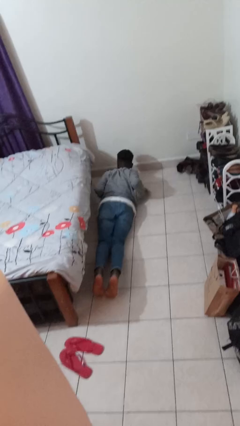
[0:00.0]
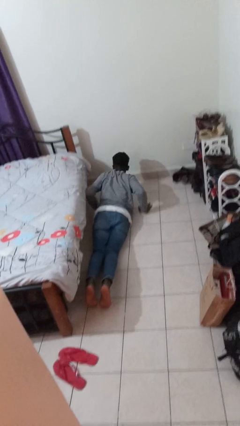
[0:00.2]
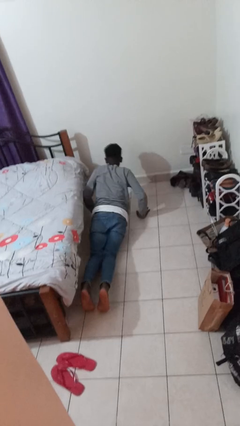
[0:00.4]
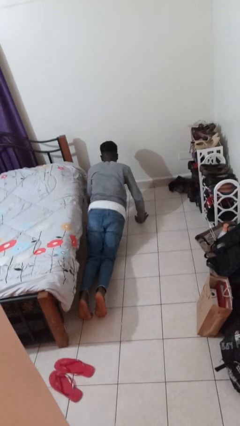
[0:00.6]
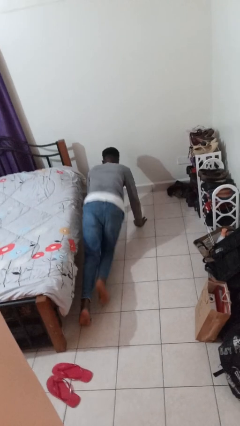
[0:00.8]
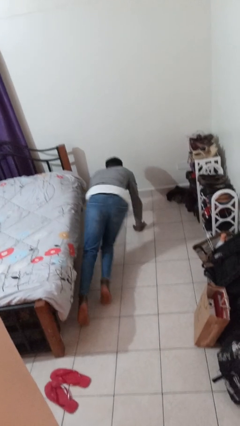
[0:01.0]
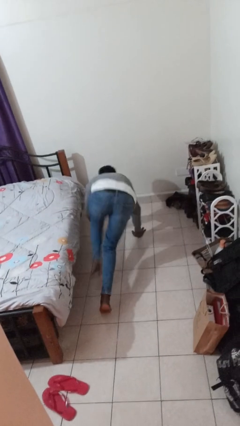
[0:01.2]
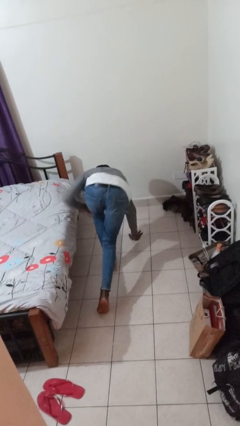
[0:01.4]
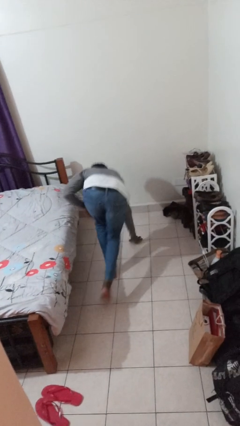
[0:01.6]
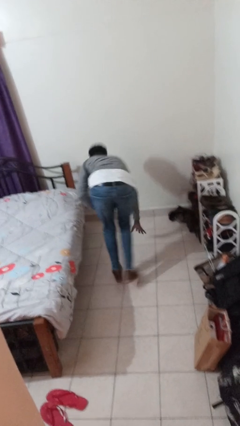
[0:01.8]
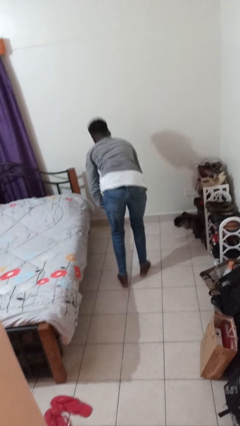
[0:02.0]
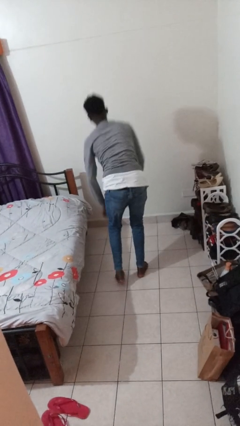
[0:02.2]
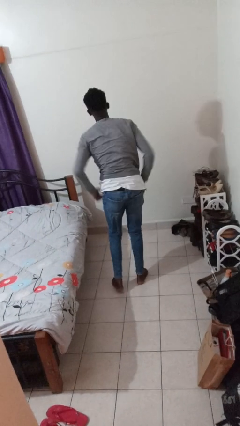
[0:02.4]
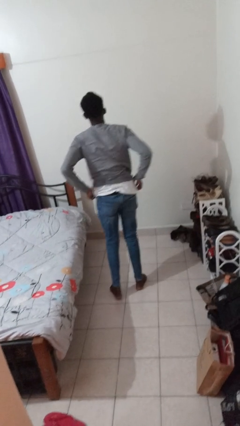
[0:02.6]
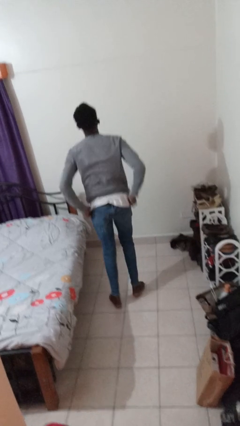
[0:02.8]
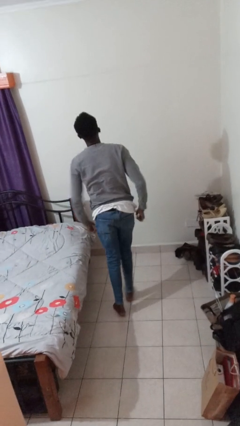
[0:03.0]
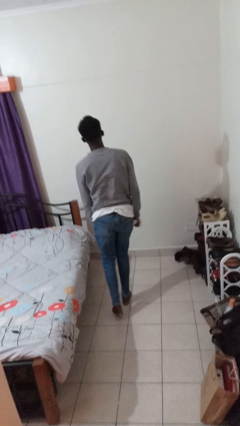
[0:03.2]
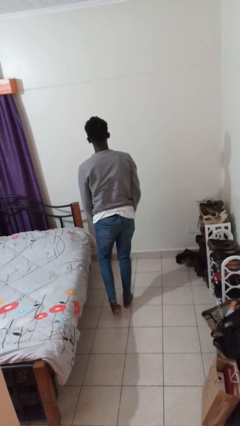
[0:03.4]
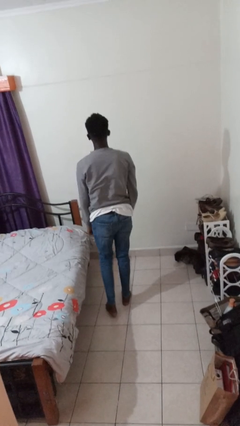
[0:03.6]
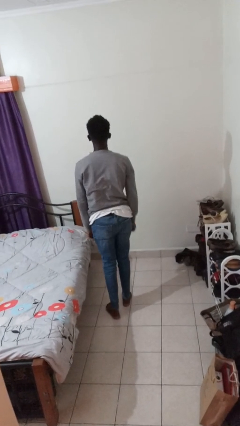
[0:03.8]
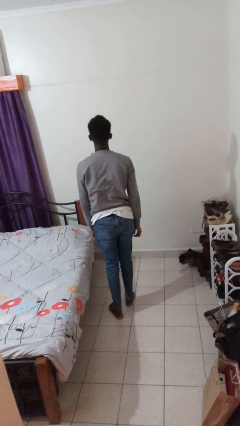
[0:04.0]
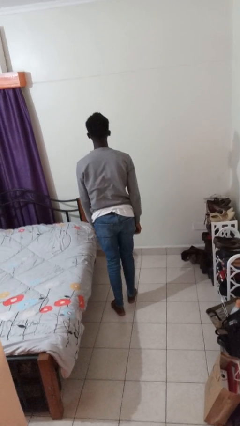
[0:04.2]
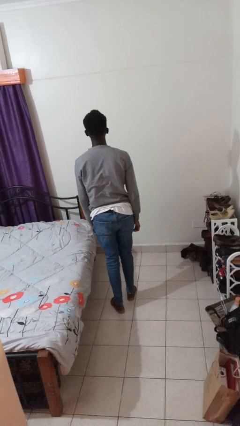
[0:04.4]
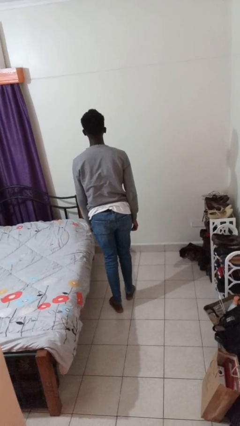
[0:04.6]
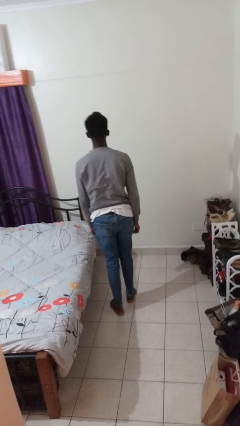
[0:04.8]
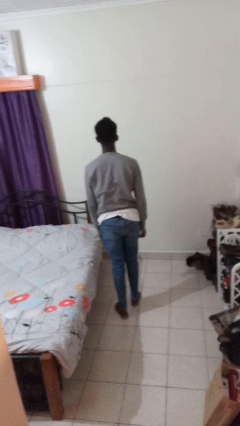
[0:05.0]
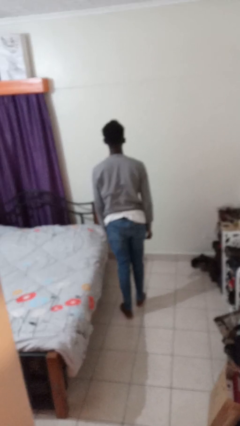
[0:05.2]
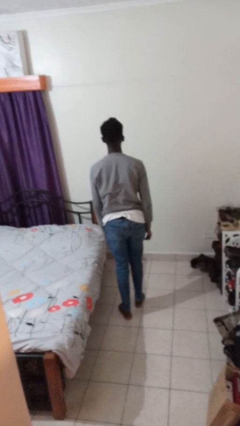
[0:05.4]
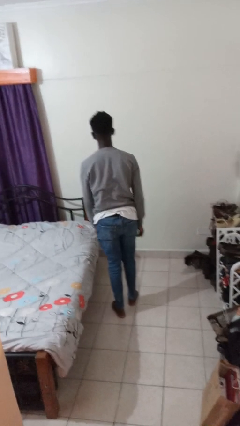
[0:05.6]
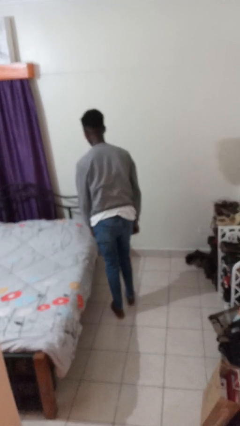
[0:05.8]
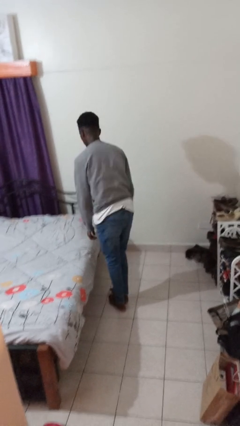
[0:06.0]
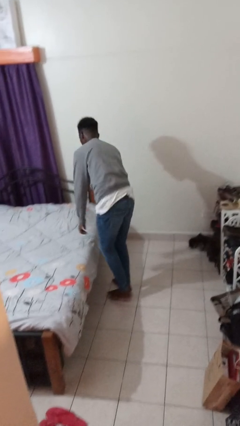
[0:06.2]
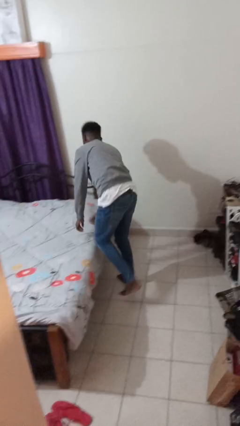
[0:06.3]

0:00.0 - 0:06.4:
person stands up from floor

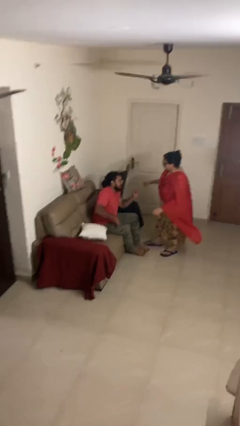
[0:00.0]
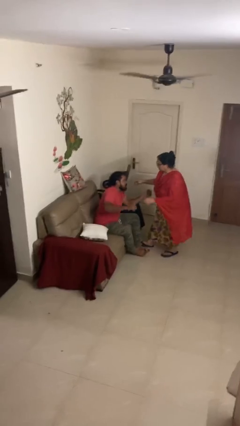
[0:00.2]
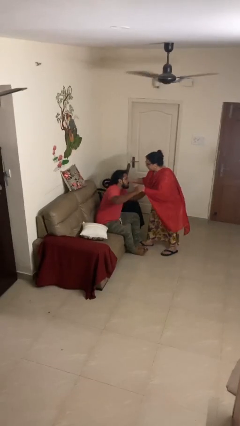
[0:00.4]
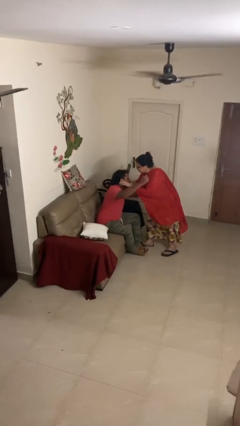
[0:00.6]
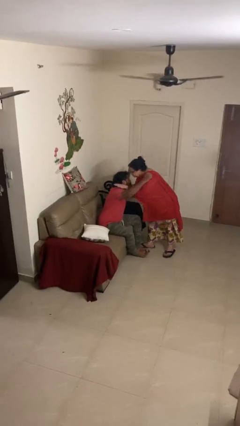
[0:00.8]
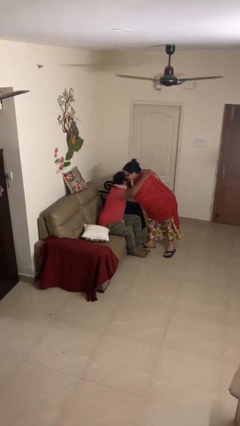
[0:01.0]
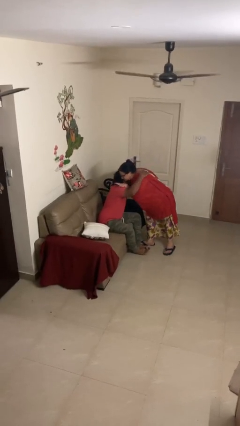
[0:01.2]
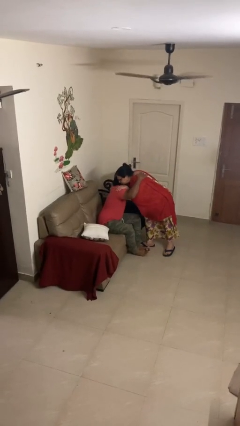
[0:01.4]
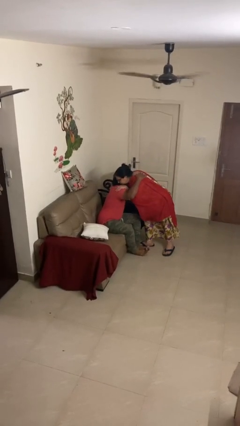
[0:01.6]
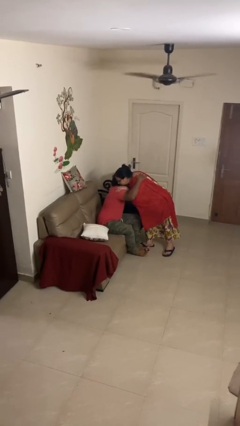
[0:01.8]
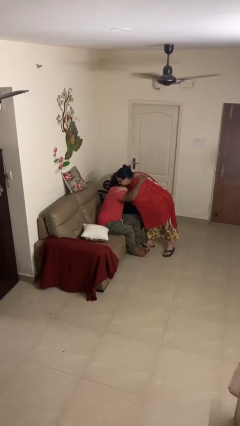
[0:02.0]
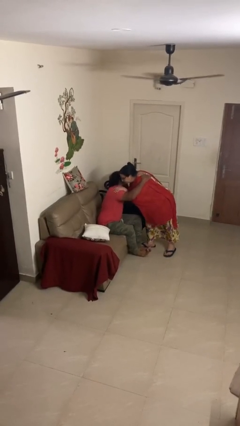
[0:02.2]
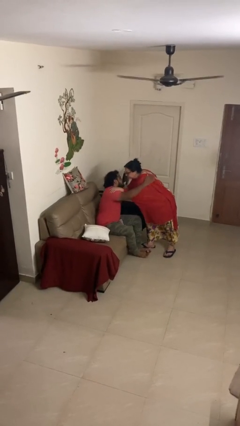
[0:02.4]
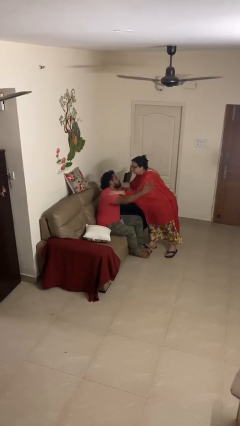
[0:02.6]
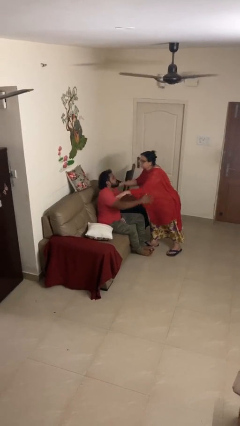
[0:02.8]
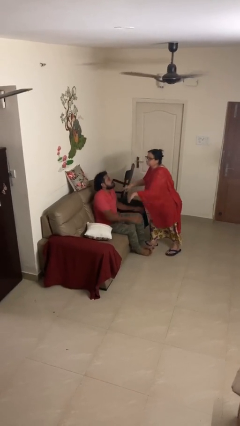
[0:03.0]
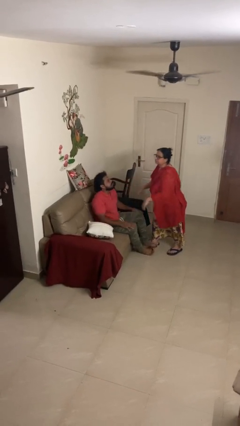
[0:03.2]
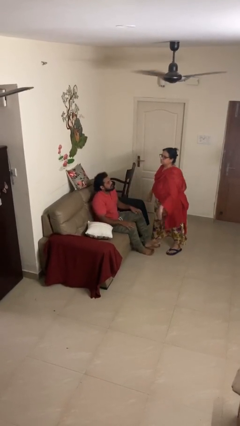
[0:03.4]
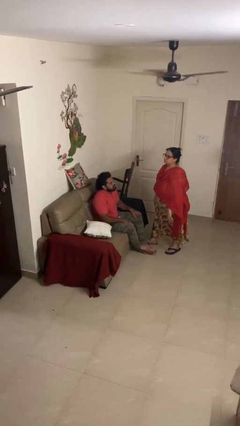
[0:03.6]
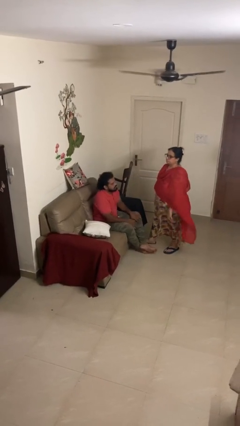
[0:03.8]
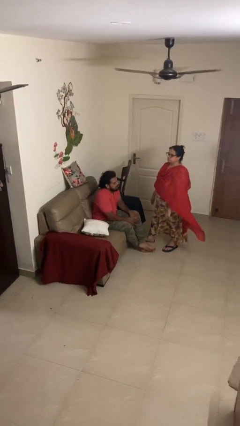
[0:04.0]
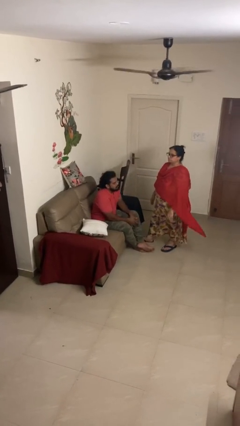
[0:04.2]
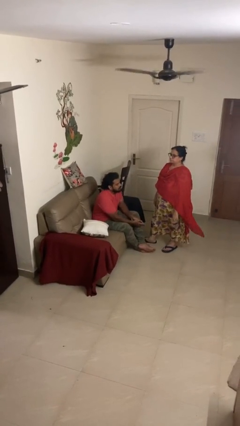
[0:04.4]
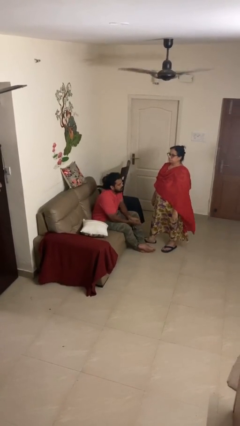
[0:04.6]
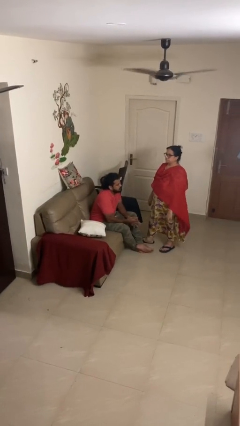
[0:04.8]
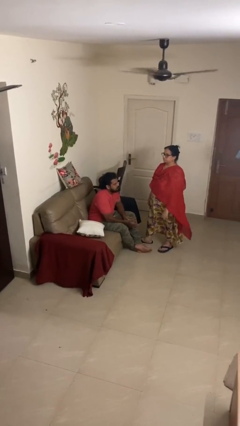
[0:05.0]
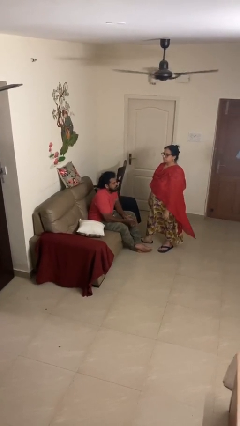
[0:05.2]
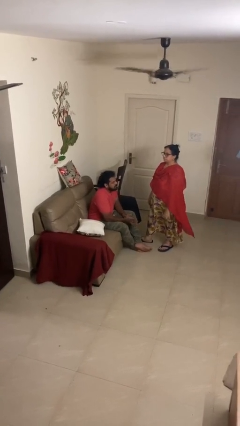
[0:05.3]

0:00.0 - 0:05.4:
person embraces person

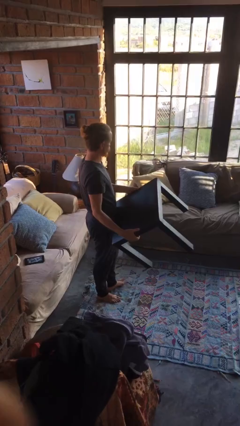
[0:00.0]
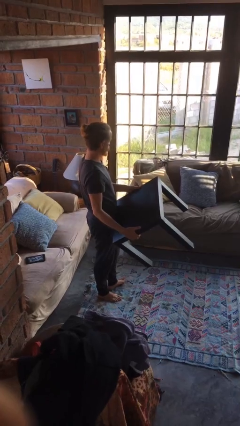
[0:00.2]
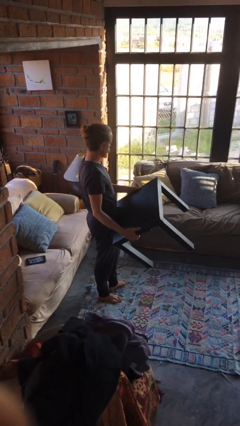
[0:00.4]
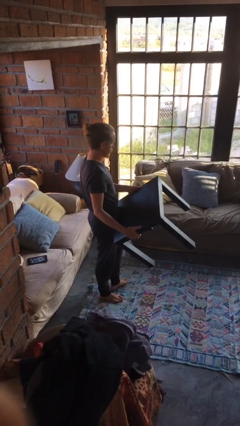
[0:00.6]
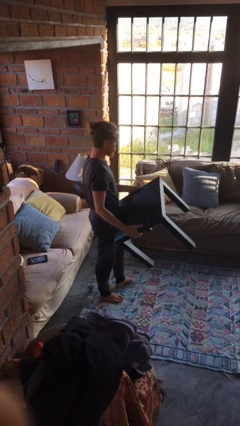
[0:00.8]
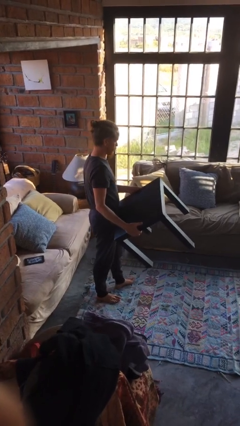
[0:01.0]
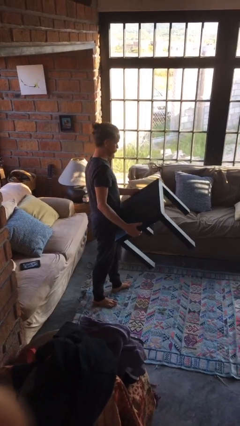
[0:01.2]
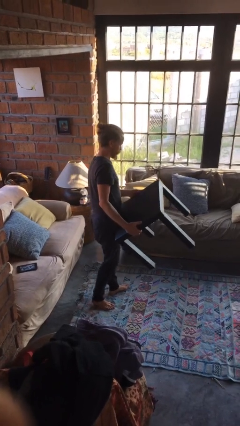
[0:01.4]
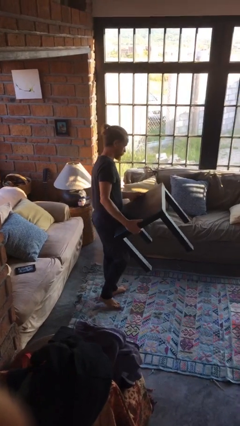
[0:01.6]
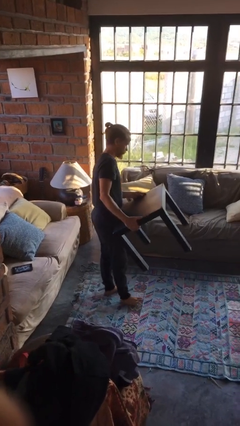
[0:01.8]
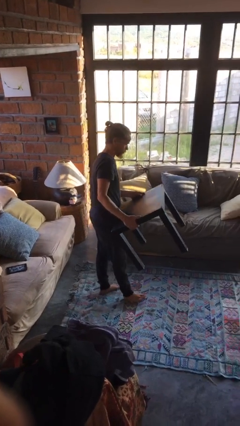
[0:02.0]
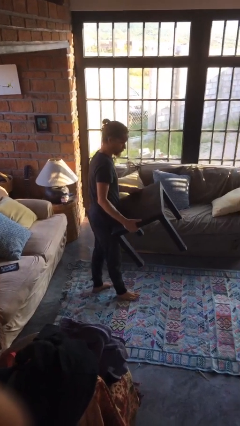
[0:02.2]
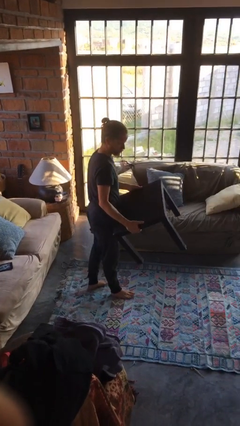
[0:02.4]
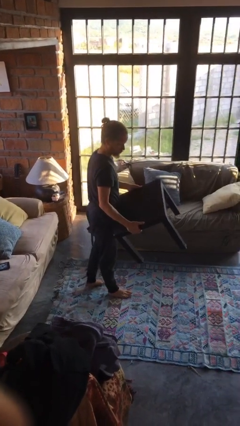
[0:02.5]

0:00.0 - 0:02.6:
person carries furniture

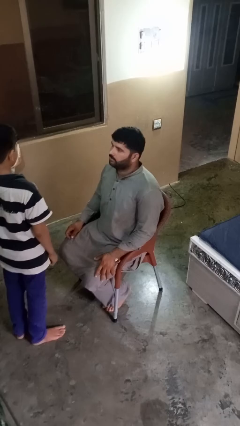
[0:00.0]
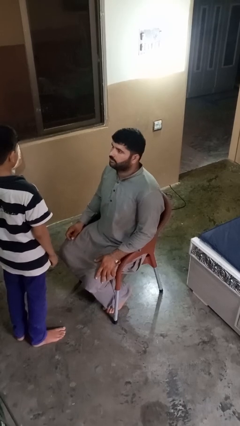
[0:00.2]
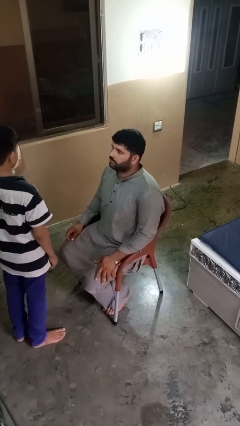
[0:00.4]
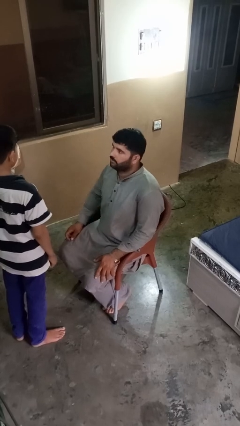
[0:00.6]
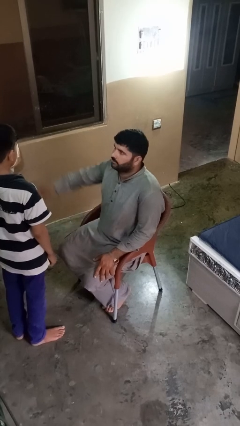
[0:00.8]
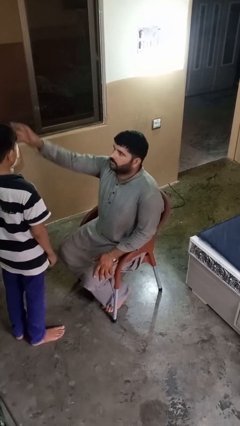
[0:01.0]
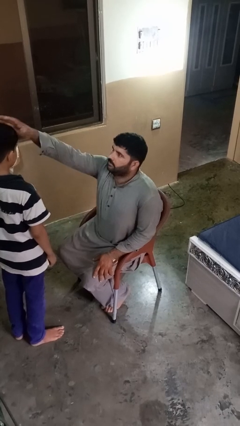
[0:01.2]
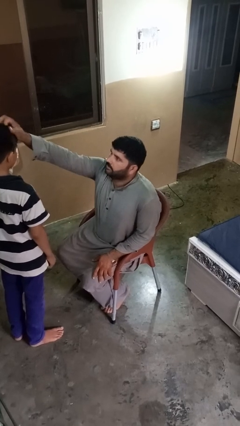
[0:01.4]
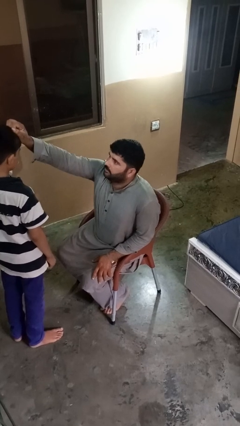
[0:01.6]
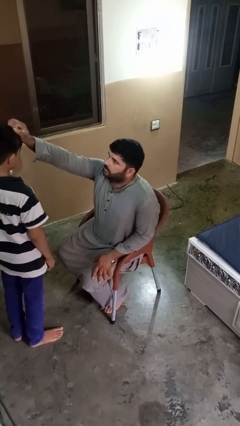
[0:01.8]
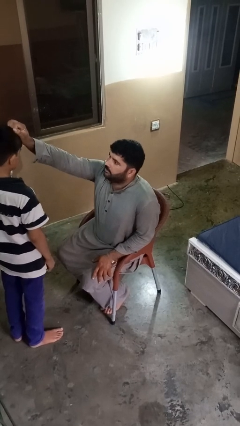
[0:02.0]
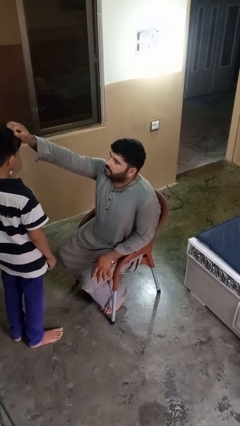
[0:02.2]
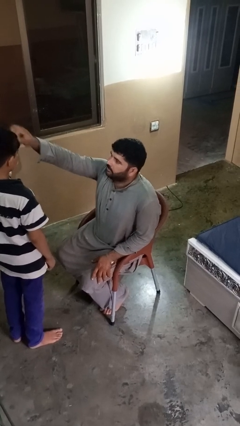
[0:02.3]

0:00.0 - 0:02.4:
person braids hair of person

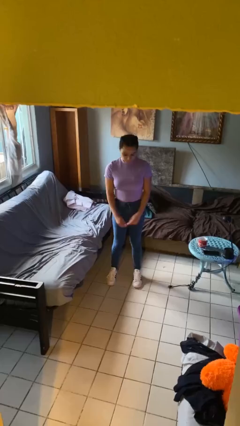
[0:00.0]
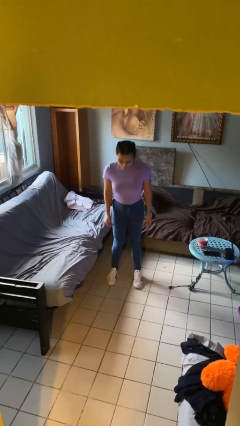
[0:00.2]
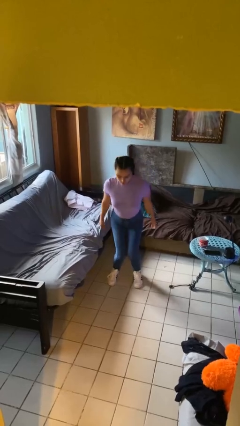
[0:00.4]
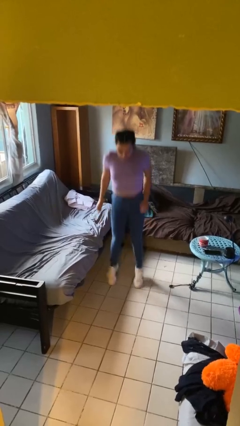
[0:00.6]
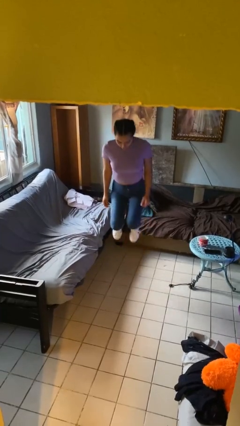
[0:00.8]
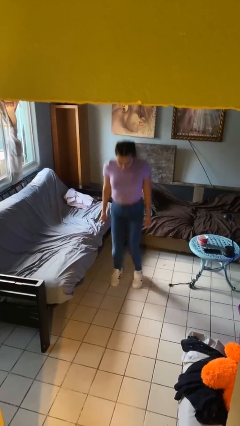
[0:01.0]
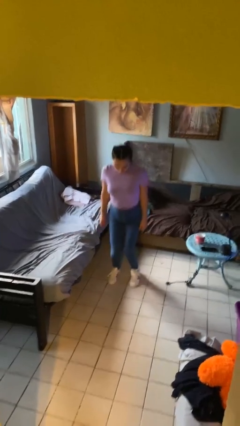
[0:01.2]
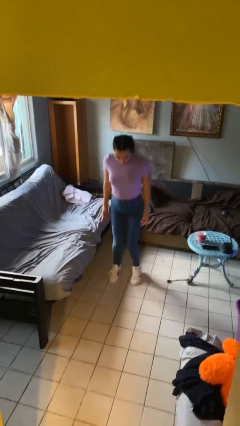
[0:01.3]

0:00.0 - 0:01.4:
person jumps
